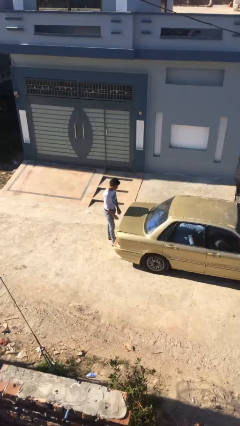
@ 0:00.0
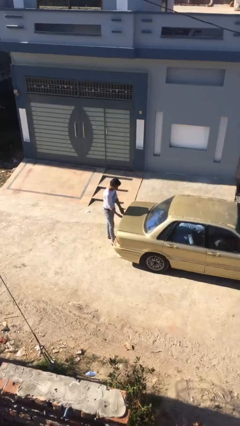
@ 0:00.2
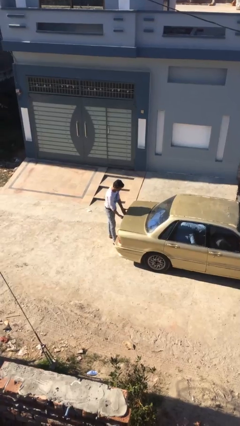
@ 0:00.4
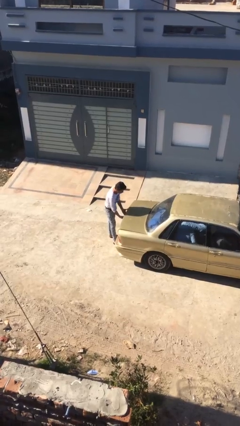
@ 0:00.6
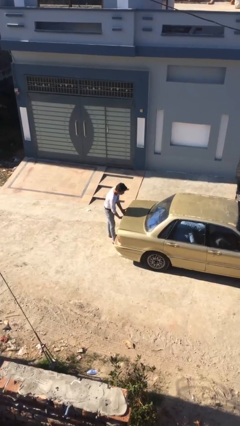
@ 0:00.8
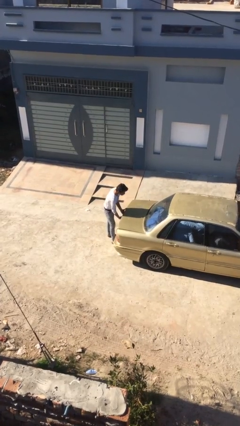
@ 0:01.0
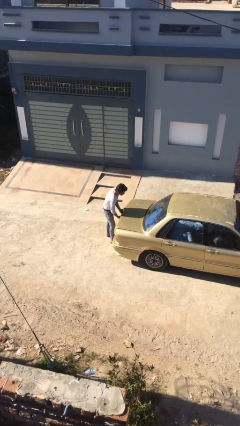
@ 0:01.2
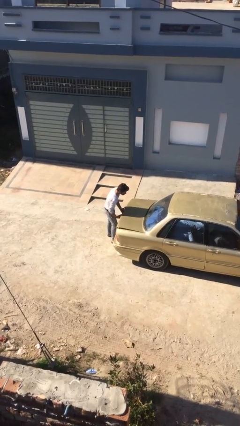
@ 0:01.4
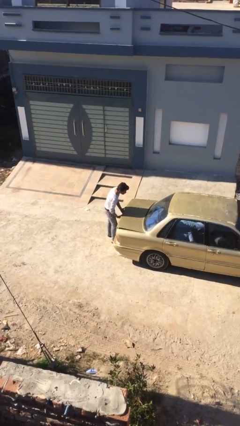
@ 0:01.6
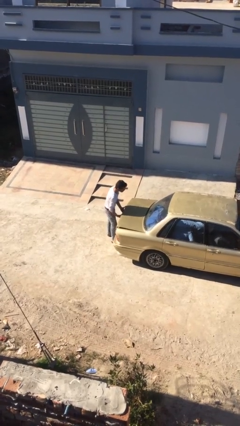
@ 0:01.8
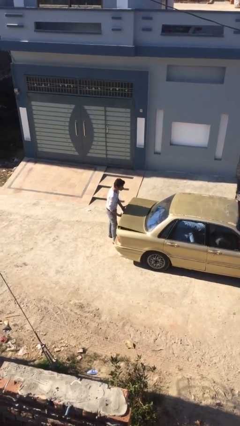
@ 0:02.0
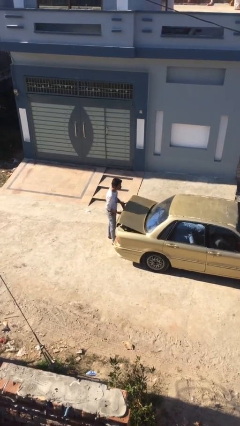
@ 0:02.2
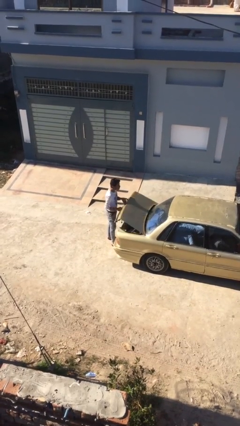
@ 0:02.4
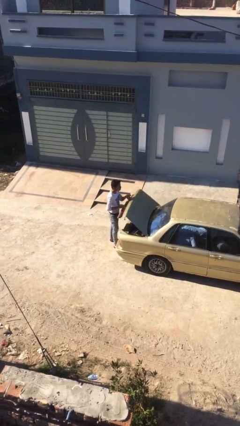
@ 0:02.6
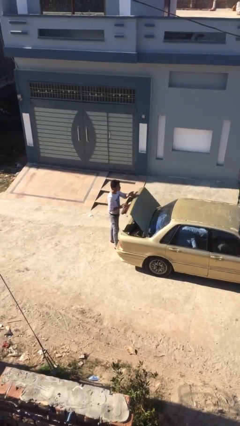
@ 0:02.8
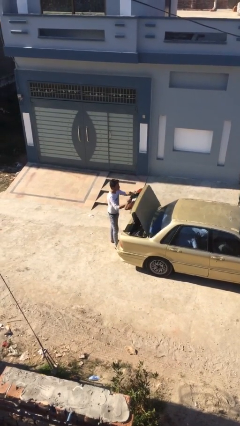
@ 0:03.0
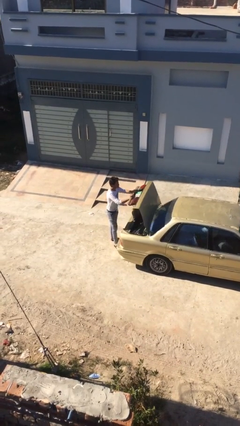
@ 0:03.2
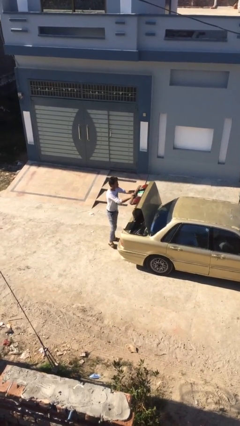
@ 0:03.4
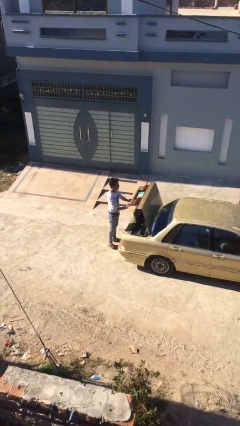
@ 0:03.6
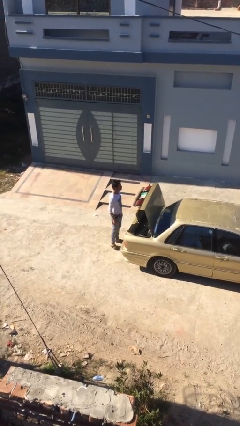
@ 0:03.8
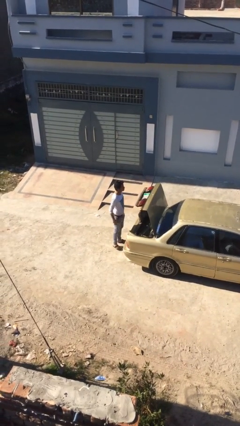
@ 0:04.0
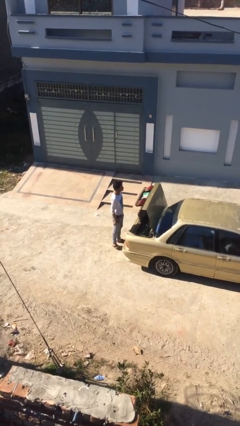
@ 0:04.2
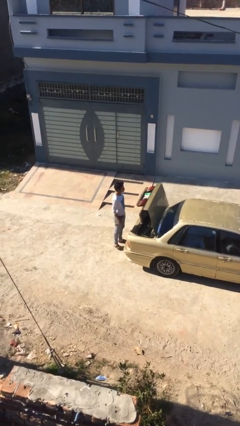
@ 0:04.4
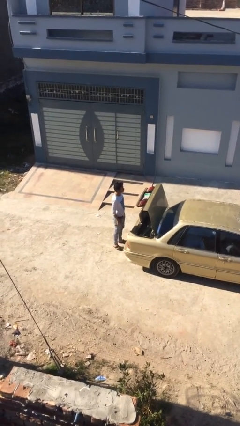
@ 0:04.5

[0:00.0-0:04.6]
person opens car trunk

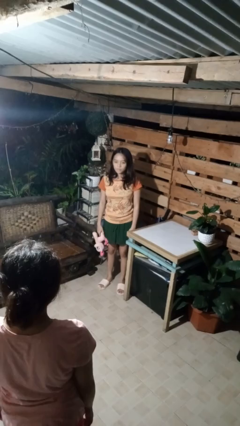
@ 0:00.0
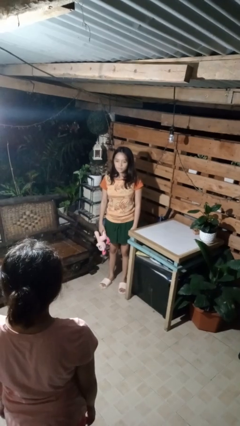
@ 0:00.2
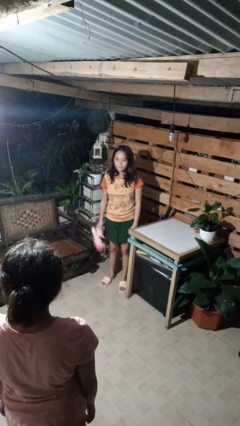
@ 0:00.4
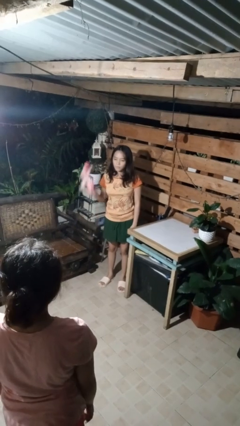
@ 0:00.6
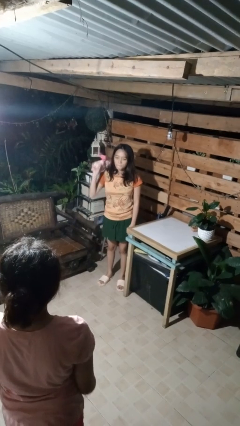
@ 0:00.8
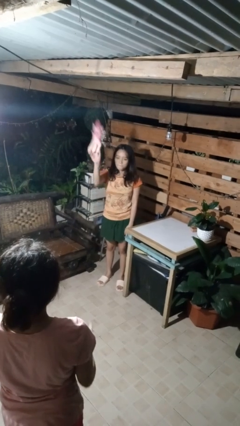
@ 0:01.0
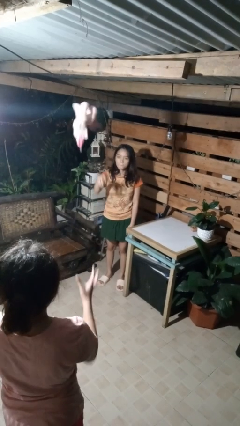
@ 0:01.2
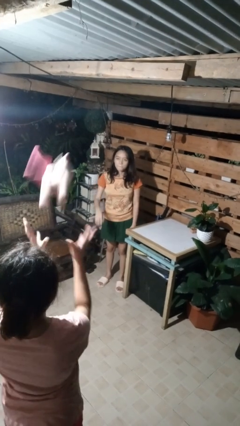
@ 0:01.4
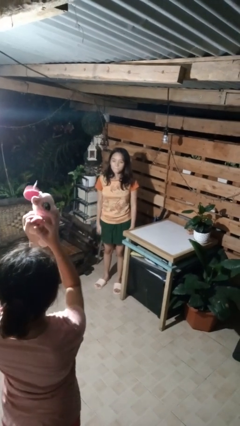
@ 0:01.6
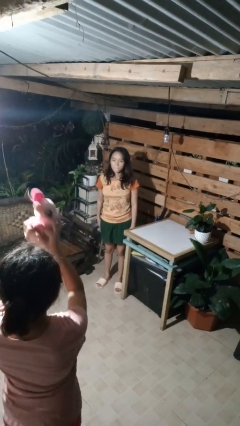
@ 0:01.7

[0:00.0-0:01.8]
person throws object to person

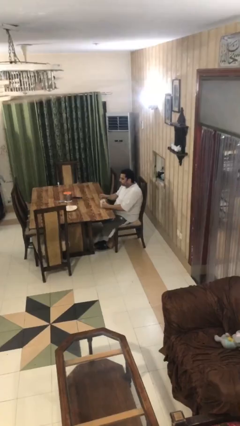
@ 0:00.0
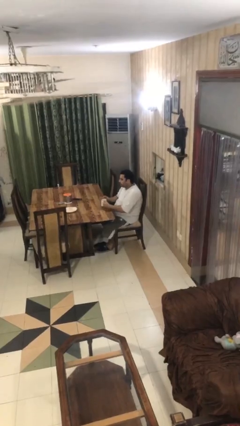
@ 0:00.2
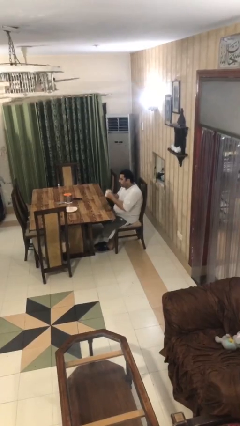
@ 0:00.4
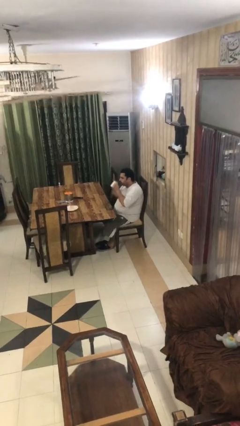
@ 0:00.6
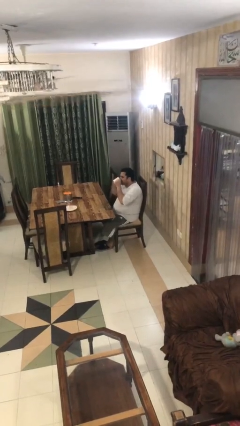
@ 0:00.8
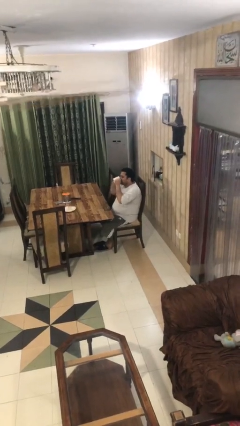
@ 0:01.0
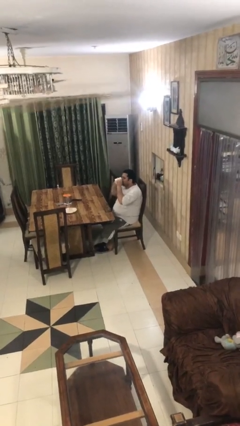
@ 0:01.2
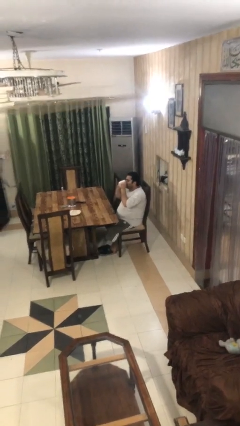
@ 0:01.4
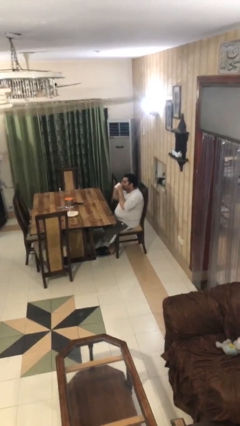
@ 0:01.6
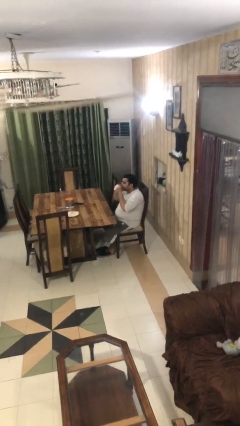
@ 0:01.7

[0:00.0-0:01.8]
person drinks from mug

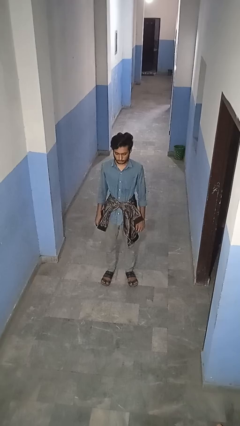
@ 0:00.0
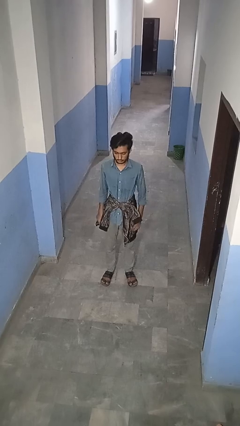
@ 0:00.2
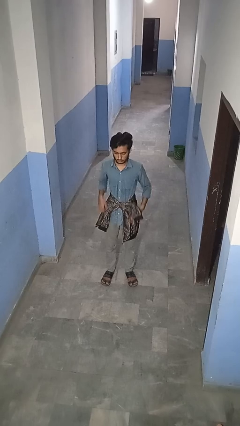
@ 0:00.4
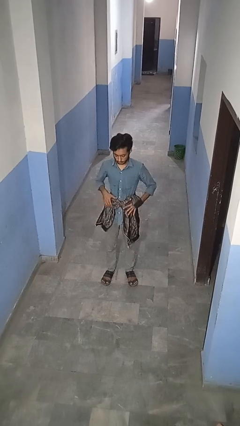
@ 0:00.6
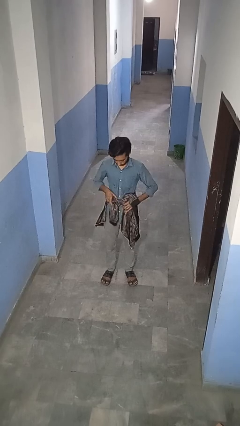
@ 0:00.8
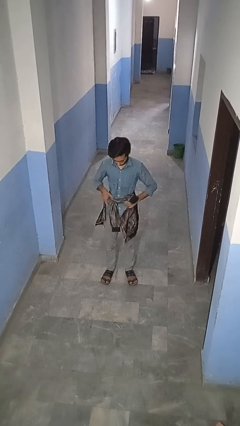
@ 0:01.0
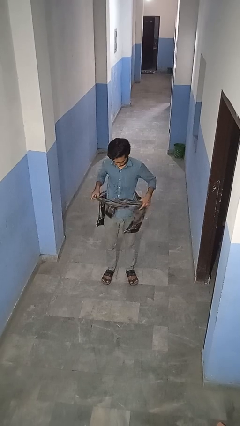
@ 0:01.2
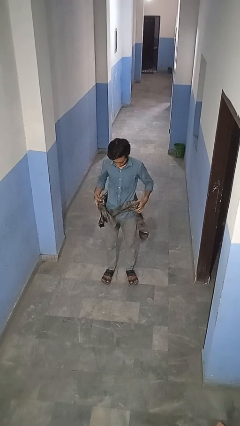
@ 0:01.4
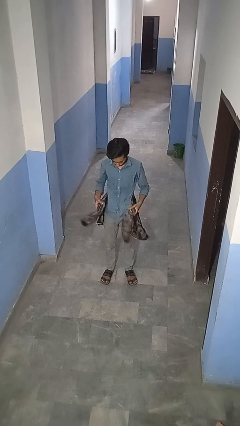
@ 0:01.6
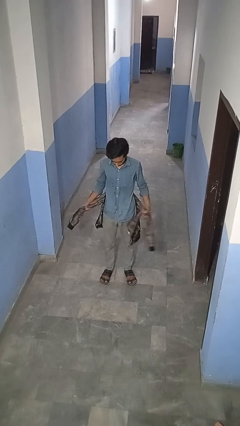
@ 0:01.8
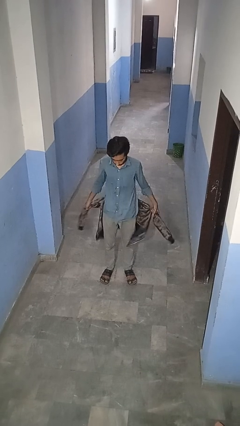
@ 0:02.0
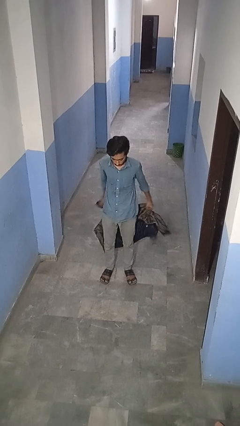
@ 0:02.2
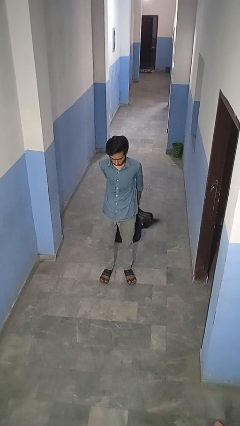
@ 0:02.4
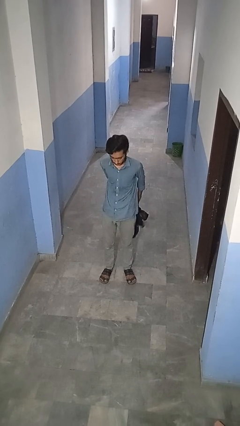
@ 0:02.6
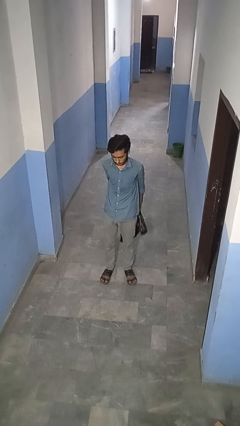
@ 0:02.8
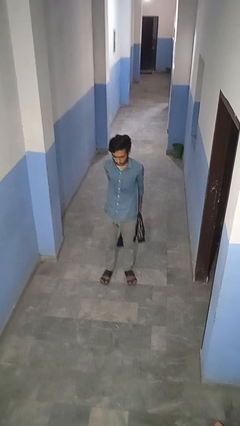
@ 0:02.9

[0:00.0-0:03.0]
person unties jacket around waist

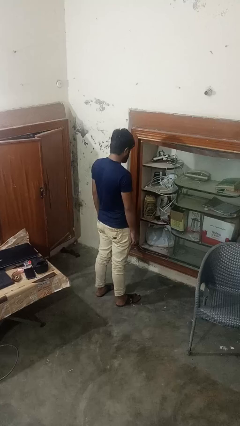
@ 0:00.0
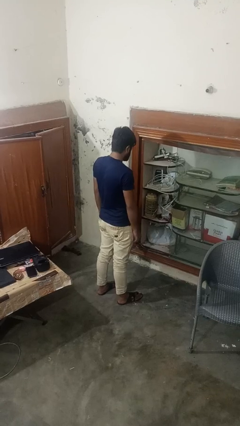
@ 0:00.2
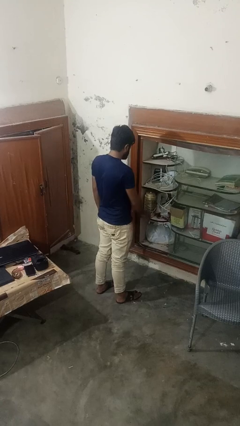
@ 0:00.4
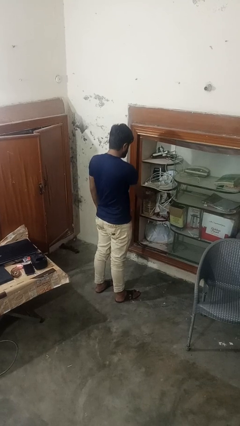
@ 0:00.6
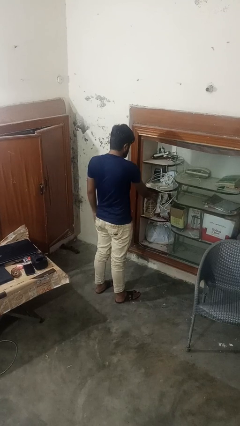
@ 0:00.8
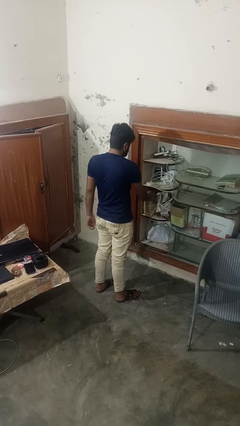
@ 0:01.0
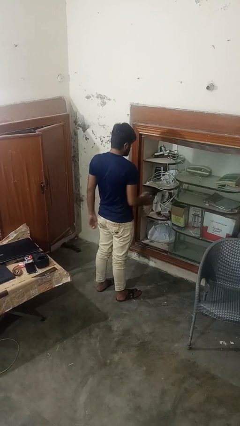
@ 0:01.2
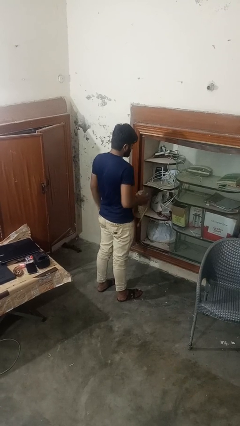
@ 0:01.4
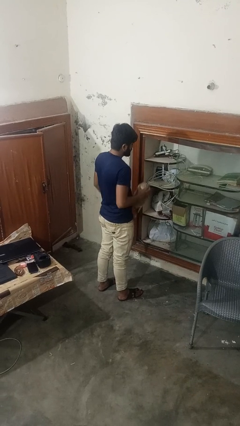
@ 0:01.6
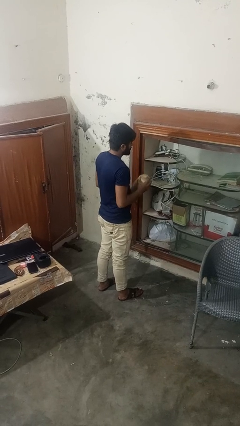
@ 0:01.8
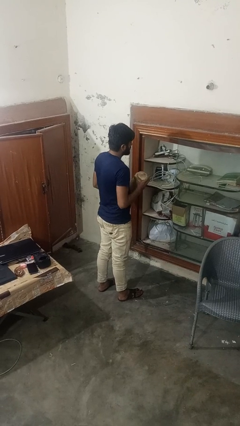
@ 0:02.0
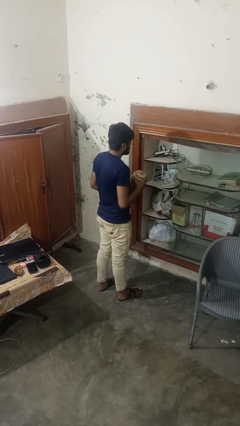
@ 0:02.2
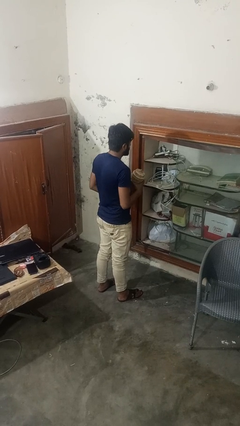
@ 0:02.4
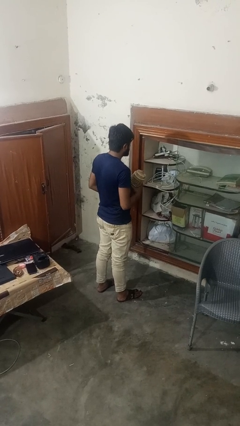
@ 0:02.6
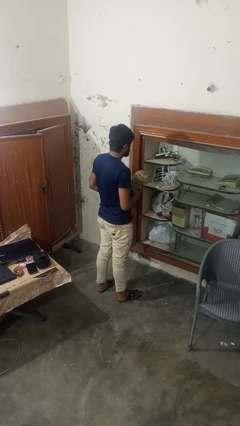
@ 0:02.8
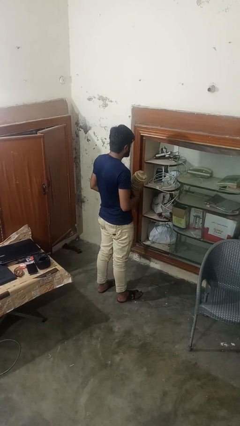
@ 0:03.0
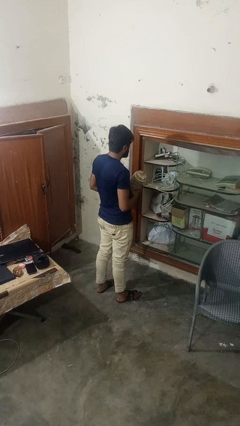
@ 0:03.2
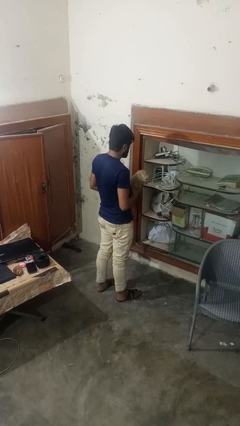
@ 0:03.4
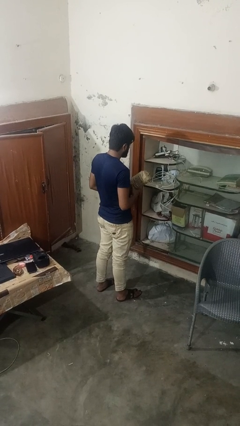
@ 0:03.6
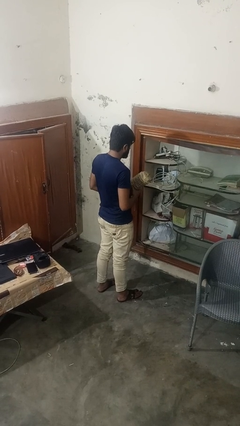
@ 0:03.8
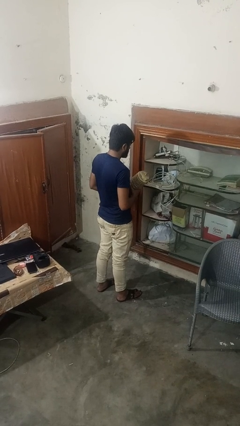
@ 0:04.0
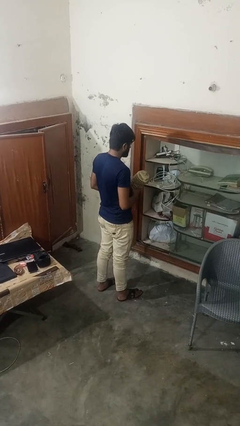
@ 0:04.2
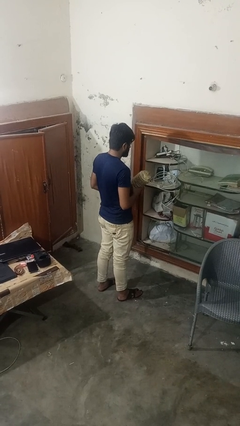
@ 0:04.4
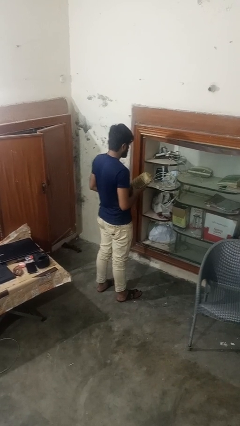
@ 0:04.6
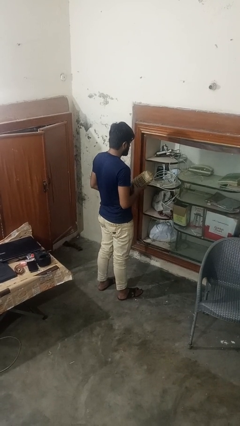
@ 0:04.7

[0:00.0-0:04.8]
person picks up object from countertop

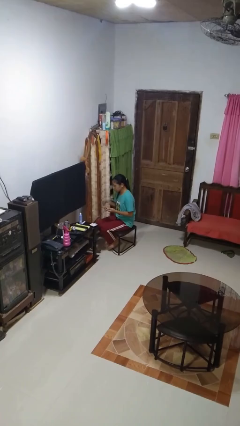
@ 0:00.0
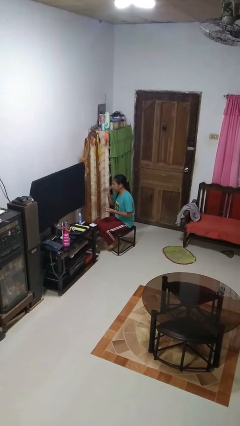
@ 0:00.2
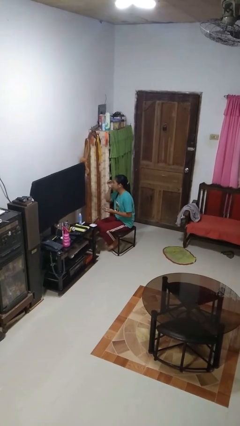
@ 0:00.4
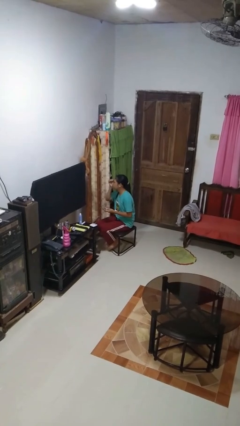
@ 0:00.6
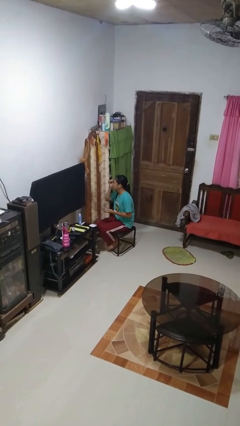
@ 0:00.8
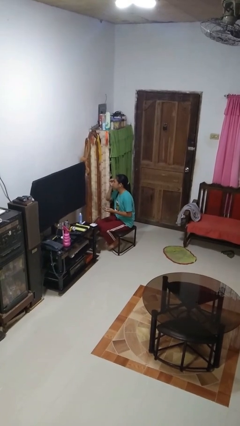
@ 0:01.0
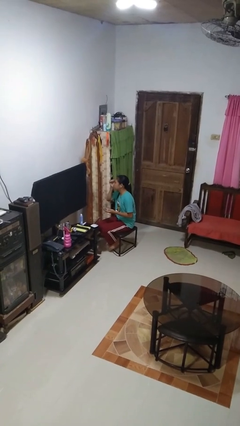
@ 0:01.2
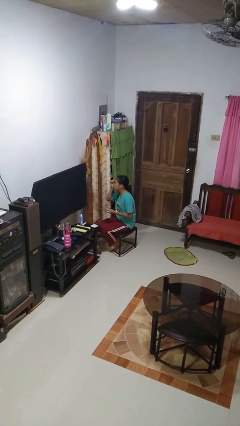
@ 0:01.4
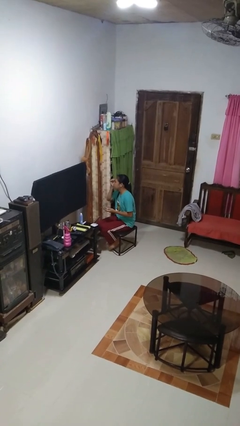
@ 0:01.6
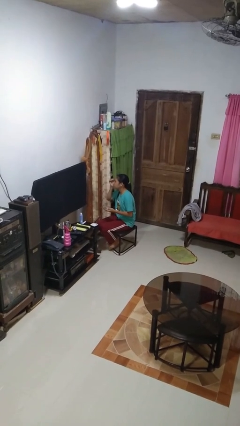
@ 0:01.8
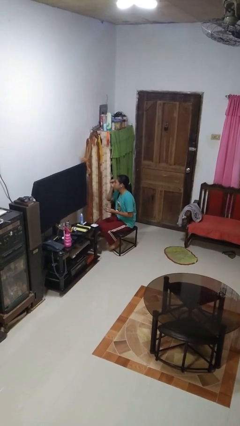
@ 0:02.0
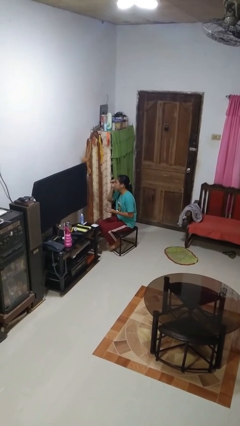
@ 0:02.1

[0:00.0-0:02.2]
person applies eye makeup
